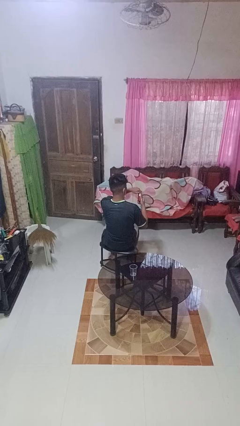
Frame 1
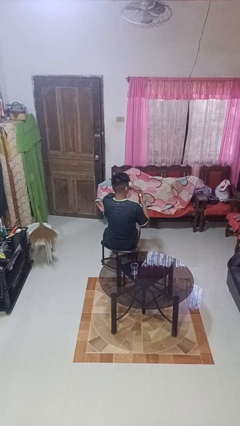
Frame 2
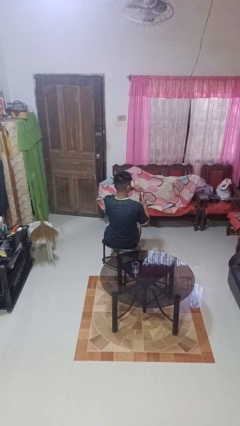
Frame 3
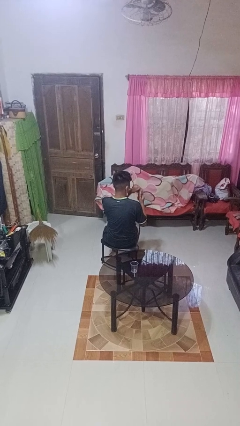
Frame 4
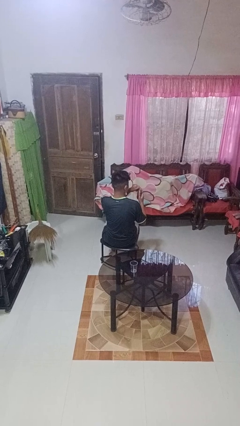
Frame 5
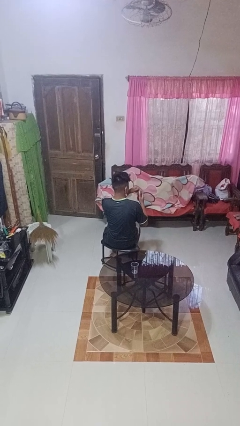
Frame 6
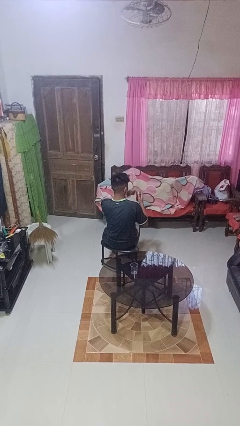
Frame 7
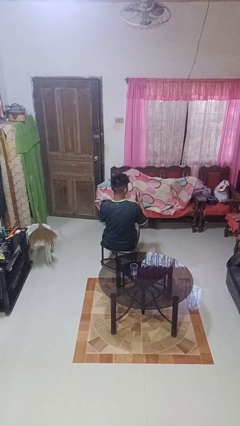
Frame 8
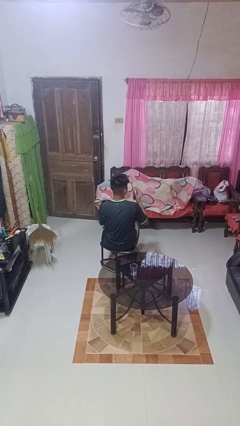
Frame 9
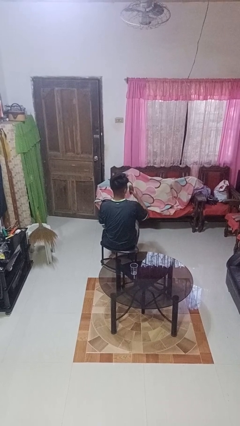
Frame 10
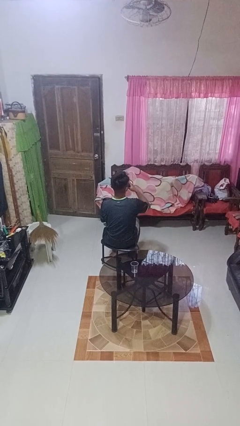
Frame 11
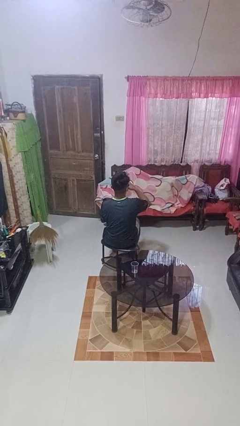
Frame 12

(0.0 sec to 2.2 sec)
person opens beverage can

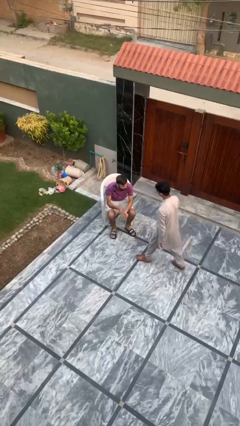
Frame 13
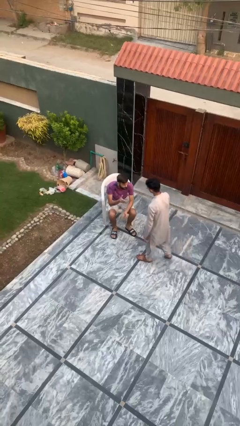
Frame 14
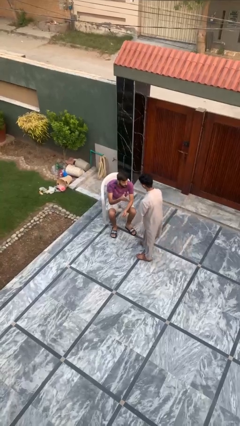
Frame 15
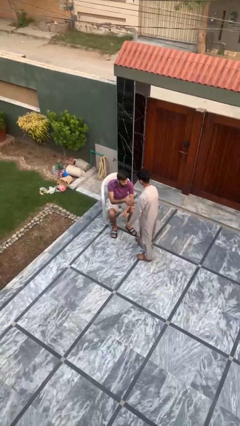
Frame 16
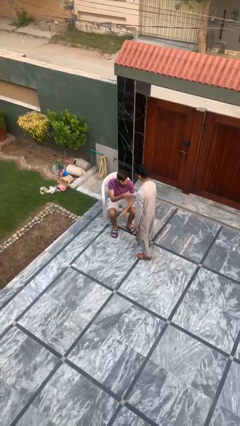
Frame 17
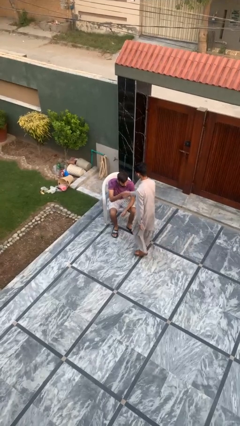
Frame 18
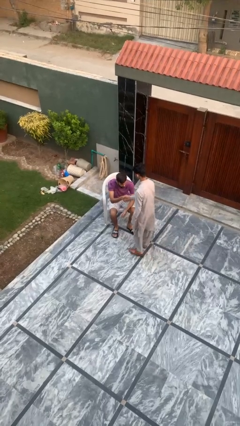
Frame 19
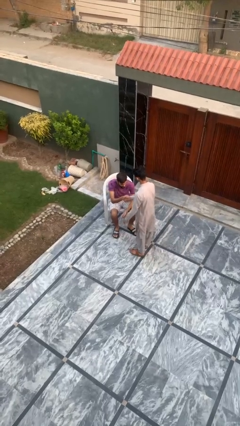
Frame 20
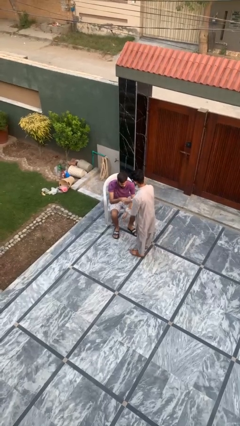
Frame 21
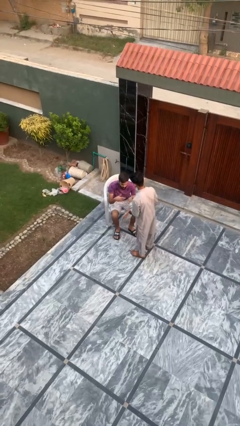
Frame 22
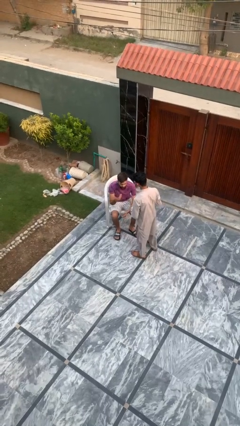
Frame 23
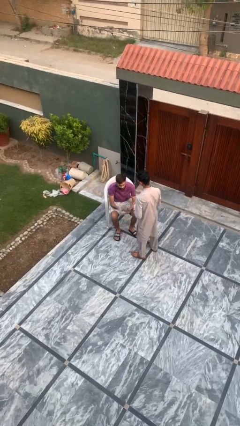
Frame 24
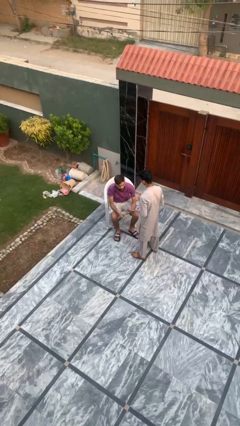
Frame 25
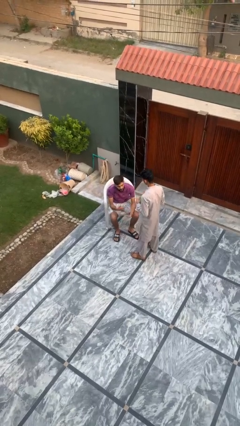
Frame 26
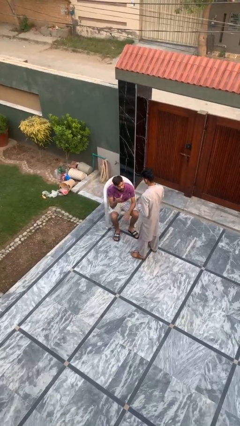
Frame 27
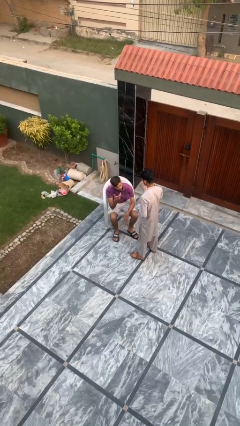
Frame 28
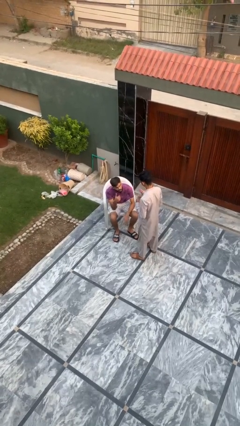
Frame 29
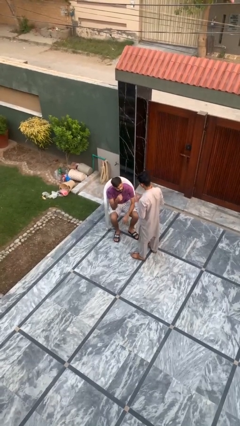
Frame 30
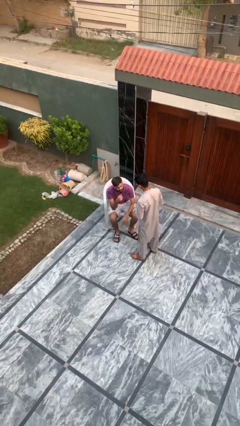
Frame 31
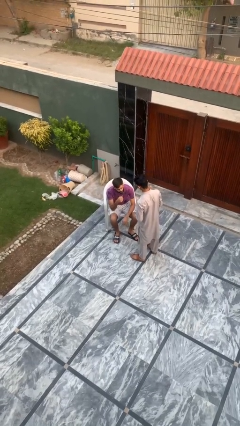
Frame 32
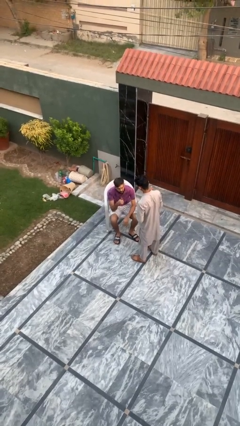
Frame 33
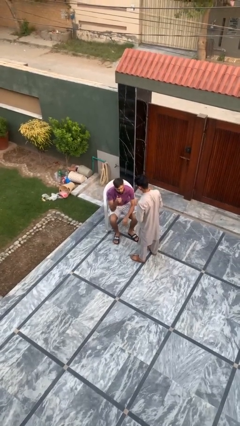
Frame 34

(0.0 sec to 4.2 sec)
person shakes hand

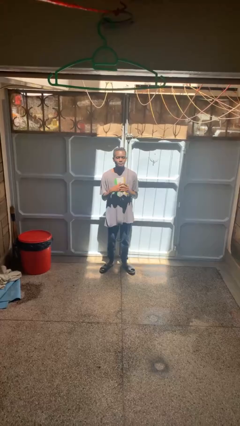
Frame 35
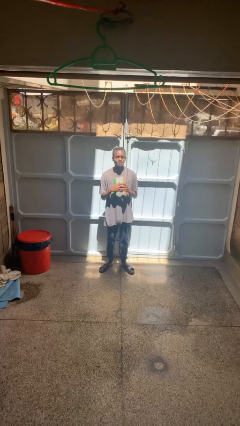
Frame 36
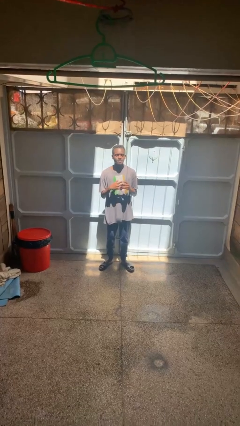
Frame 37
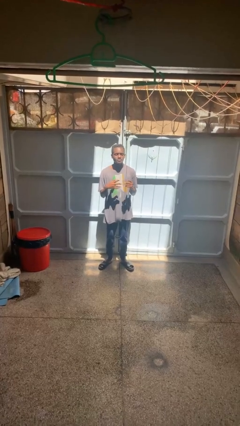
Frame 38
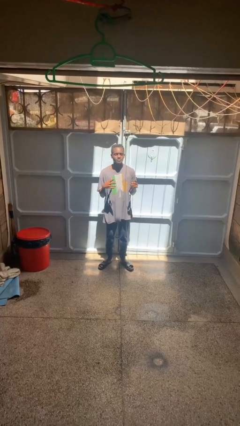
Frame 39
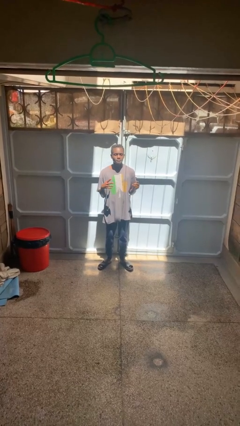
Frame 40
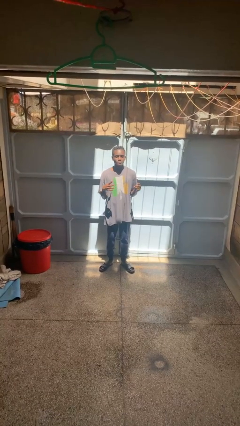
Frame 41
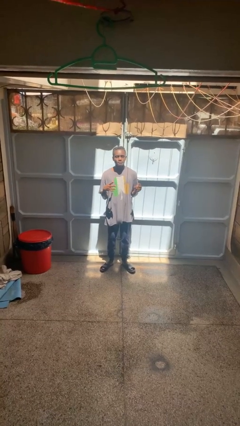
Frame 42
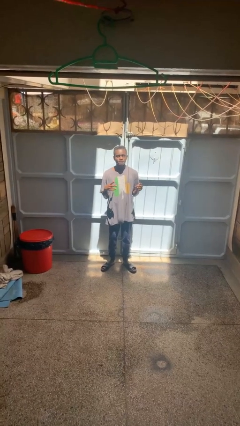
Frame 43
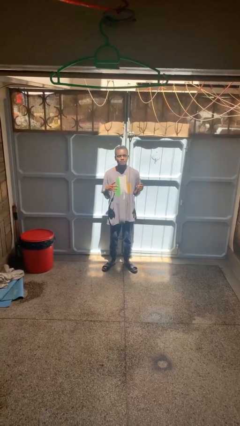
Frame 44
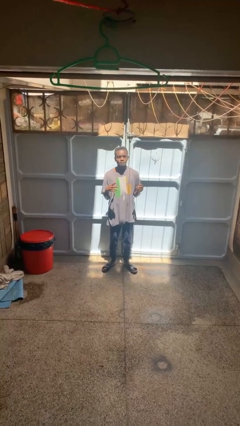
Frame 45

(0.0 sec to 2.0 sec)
person takes off ring

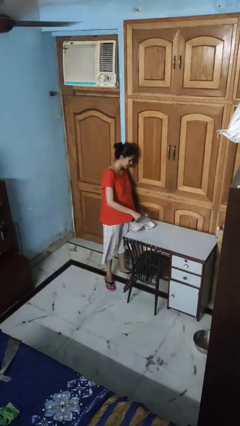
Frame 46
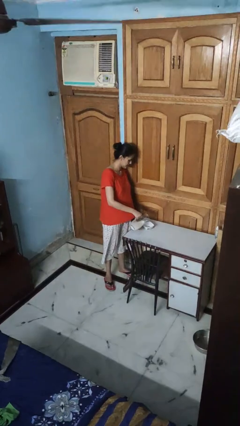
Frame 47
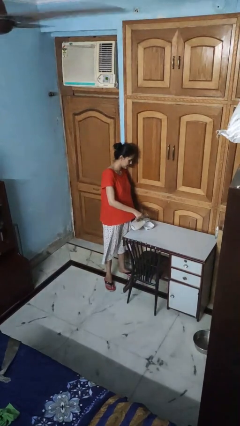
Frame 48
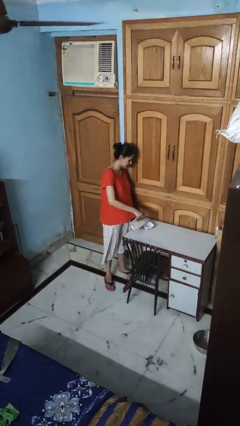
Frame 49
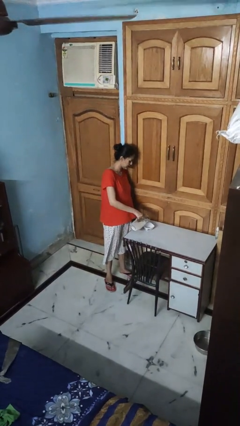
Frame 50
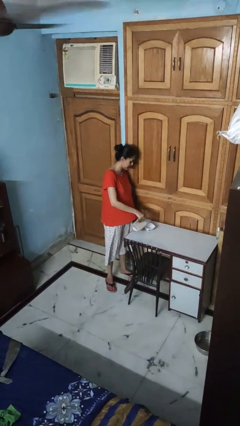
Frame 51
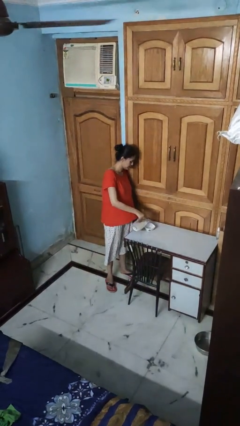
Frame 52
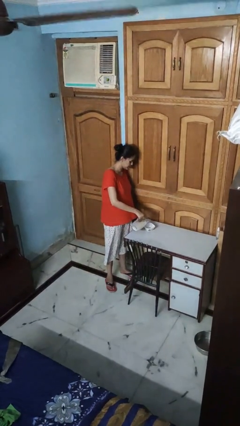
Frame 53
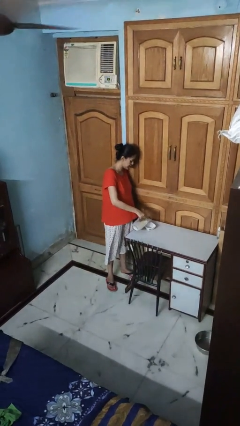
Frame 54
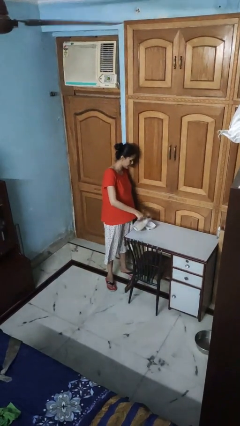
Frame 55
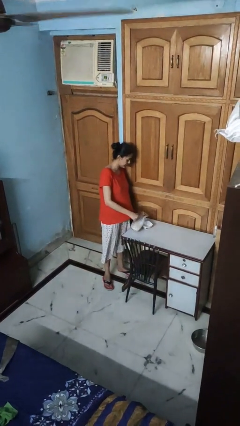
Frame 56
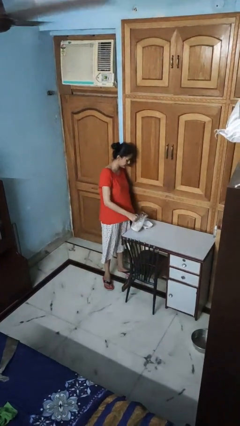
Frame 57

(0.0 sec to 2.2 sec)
person pours into bowl

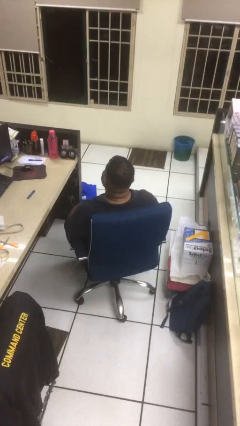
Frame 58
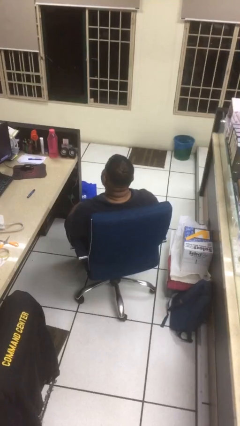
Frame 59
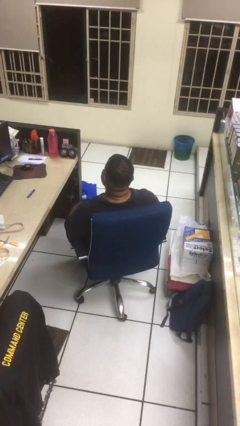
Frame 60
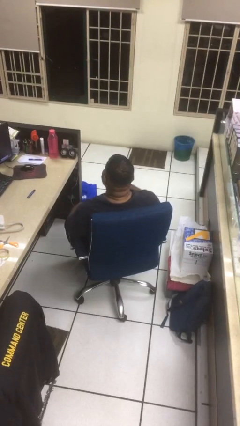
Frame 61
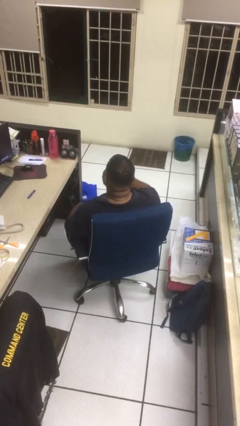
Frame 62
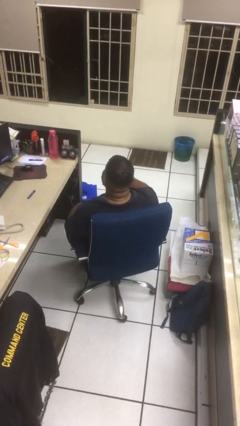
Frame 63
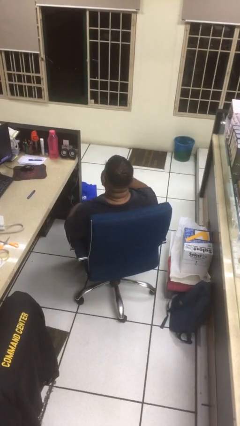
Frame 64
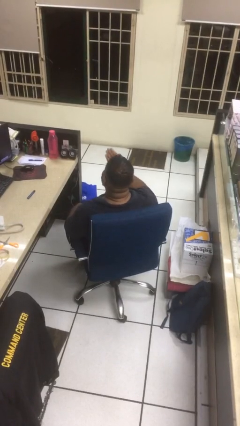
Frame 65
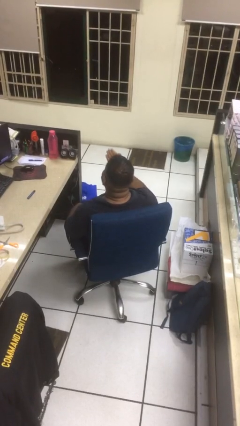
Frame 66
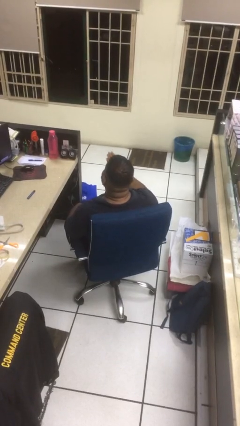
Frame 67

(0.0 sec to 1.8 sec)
person gestures blow kiss

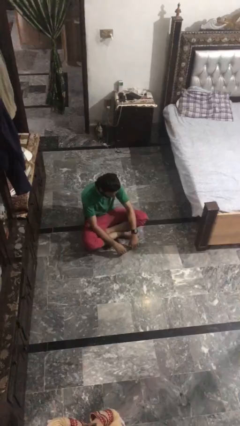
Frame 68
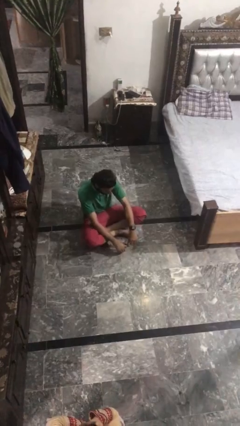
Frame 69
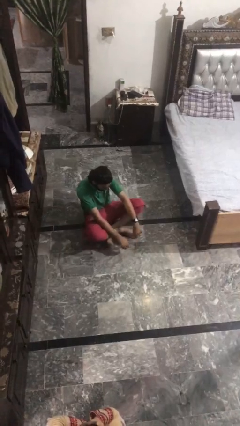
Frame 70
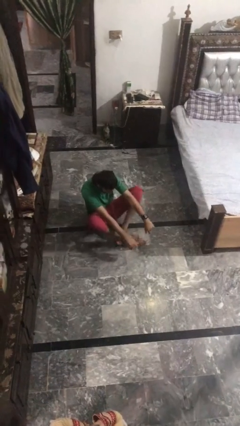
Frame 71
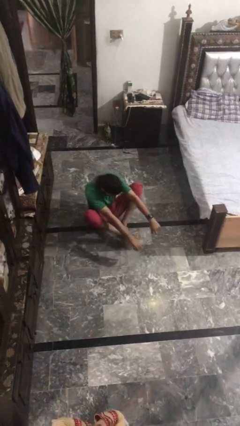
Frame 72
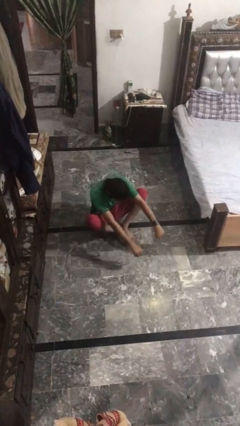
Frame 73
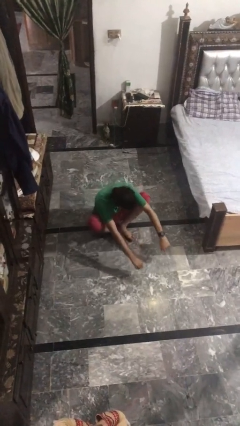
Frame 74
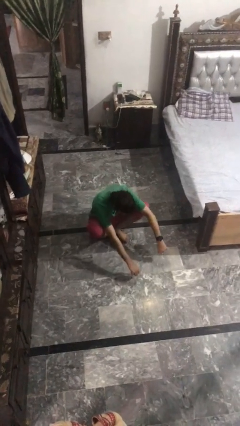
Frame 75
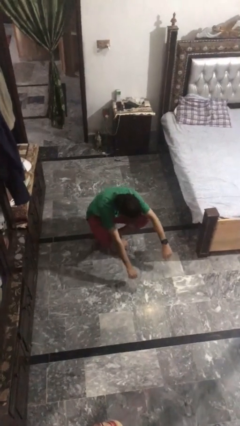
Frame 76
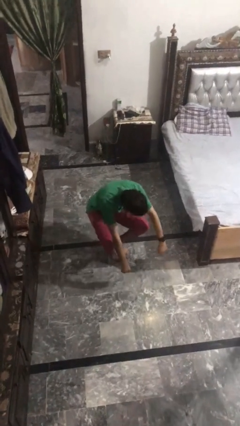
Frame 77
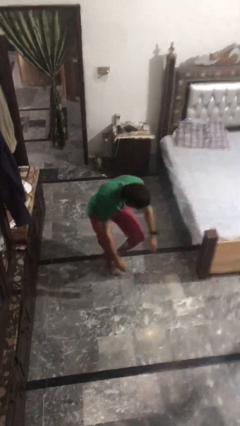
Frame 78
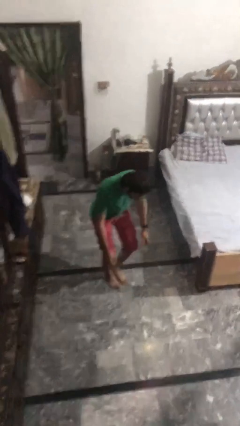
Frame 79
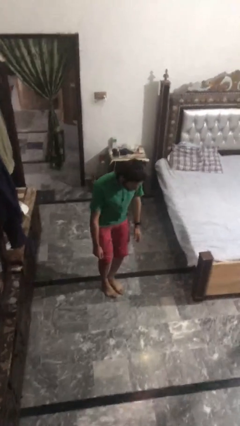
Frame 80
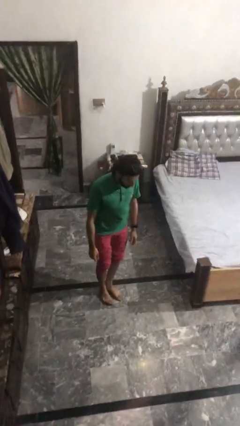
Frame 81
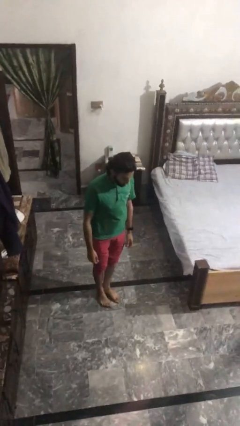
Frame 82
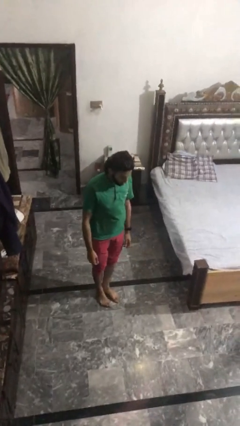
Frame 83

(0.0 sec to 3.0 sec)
person stands up from floor

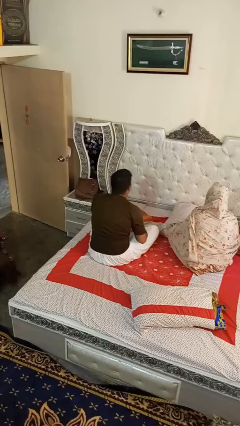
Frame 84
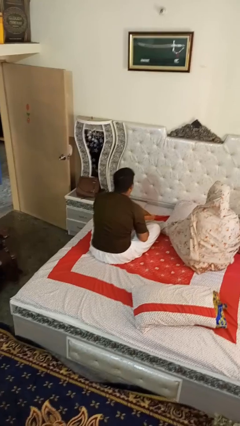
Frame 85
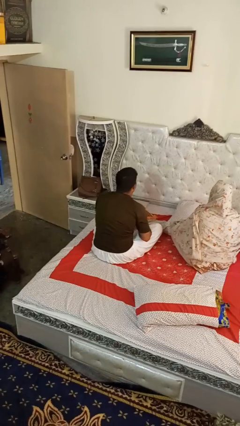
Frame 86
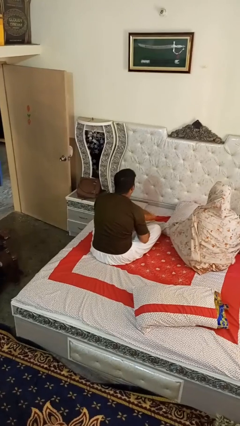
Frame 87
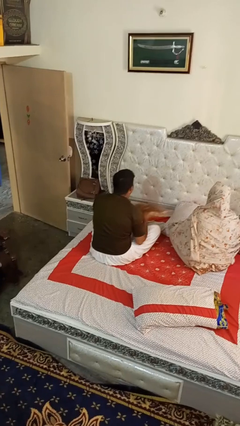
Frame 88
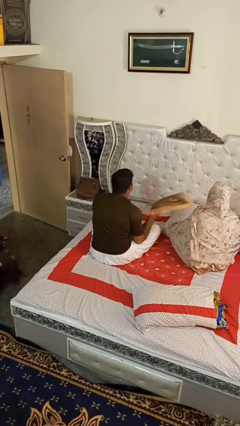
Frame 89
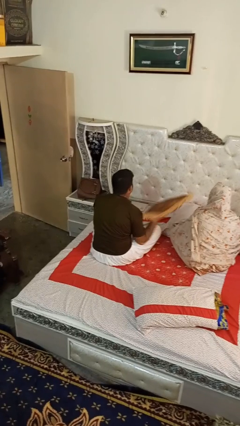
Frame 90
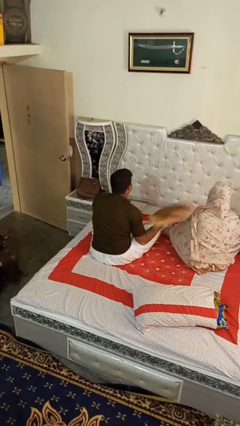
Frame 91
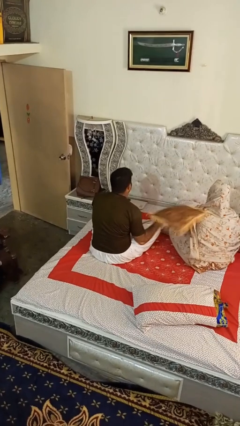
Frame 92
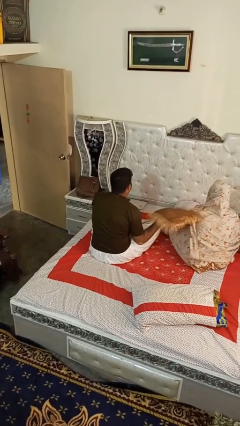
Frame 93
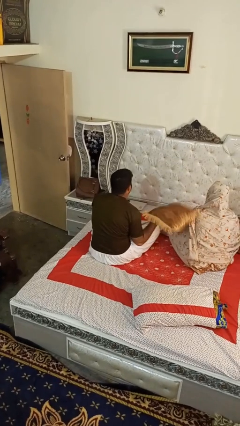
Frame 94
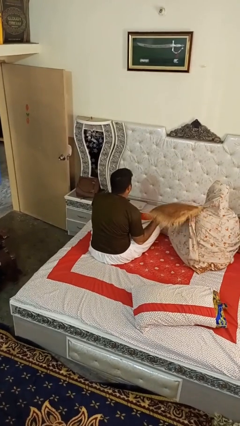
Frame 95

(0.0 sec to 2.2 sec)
person hits person with pillow
